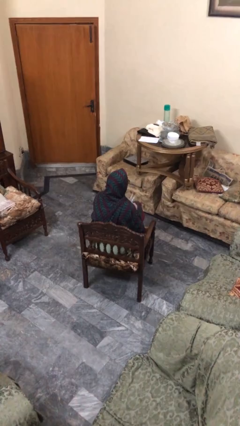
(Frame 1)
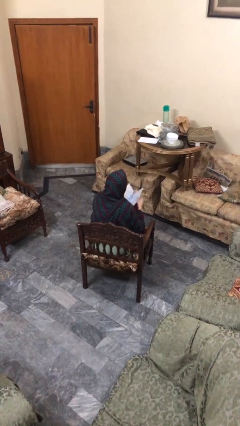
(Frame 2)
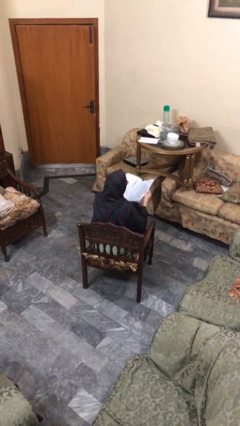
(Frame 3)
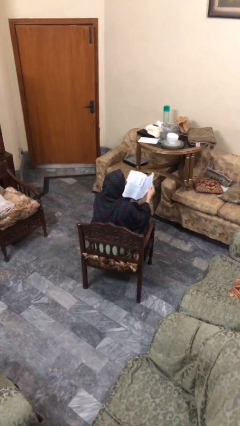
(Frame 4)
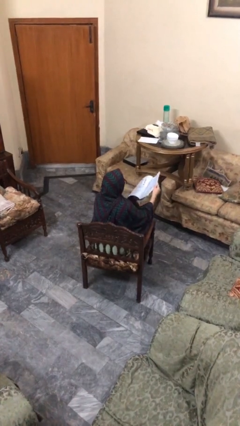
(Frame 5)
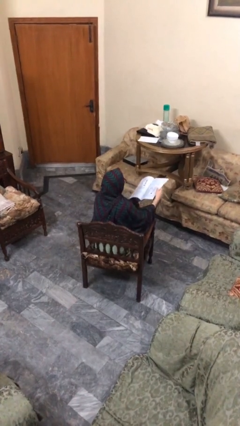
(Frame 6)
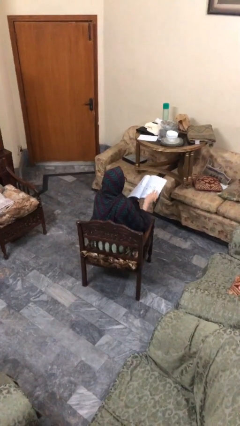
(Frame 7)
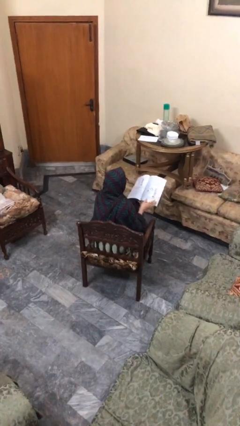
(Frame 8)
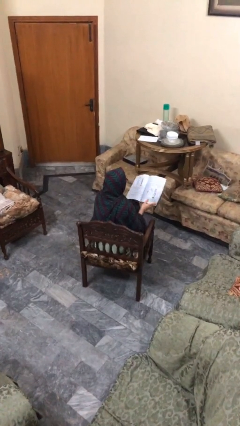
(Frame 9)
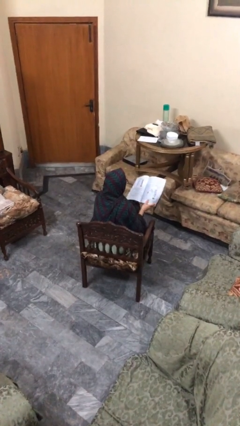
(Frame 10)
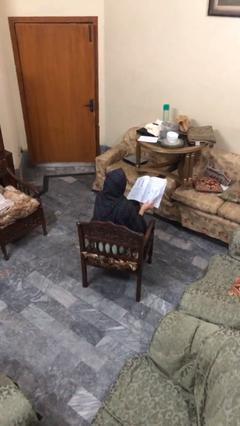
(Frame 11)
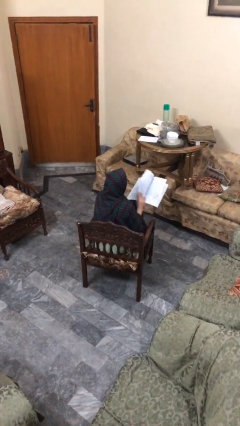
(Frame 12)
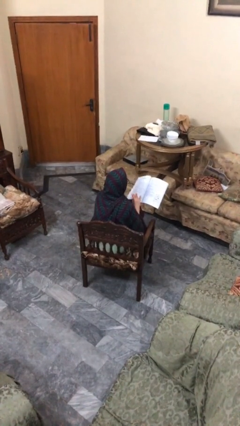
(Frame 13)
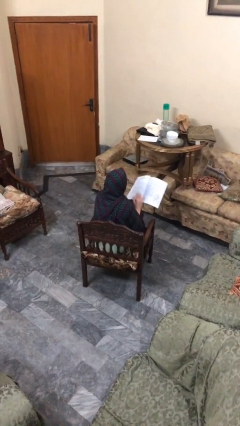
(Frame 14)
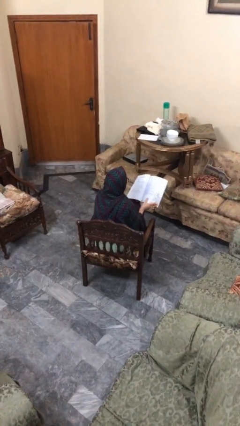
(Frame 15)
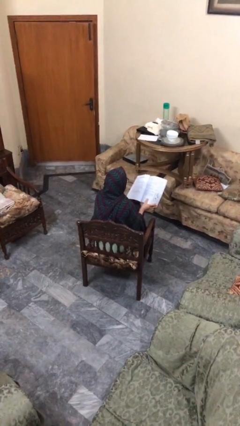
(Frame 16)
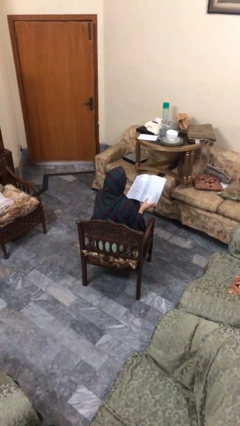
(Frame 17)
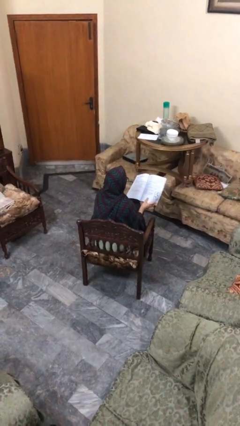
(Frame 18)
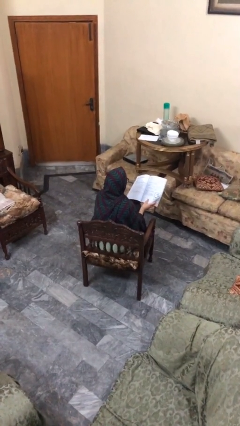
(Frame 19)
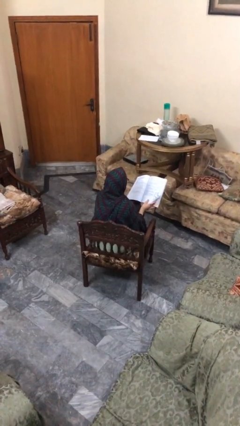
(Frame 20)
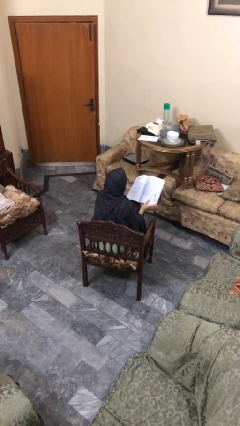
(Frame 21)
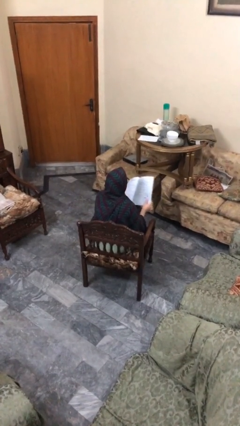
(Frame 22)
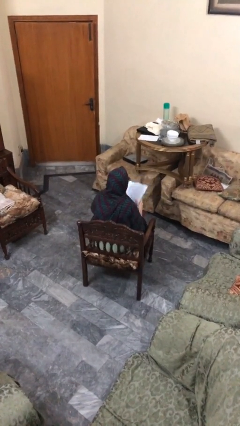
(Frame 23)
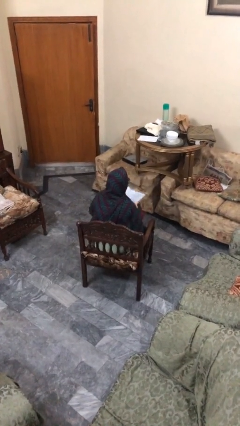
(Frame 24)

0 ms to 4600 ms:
person reads book

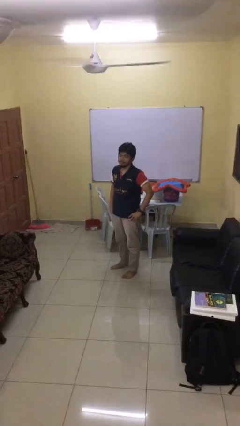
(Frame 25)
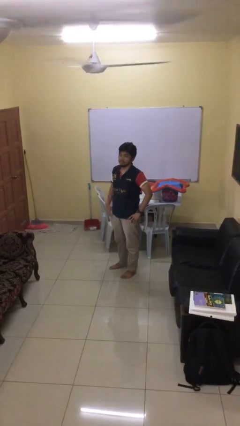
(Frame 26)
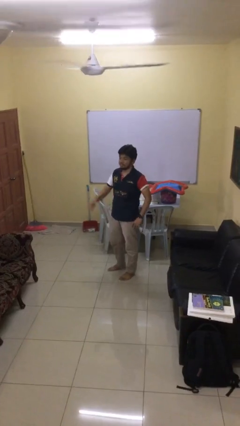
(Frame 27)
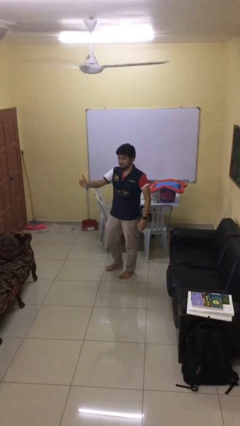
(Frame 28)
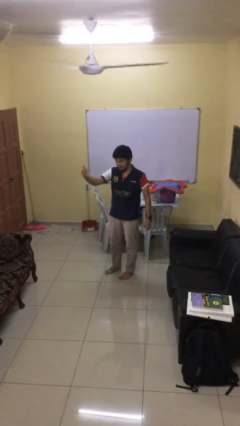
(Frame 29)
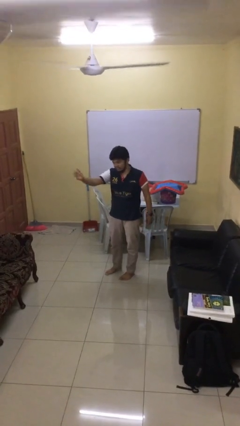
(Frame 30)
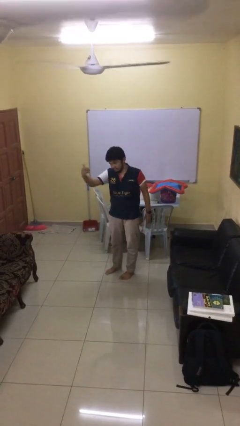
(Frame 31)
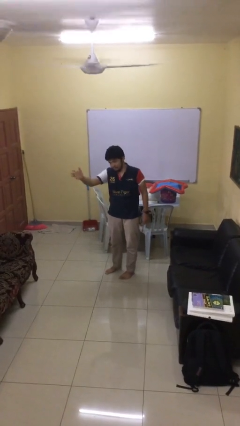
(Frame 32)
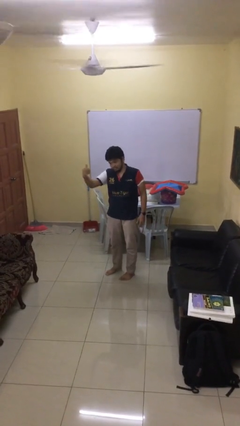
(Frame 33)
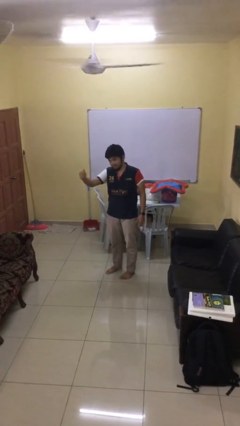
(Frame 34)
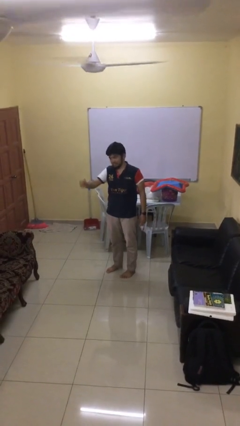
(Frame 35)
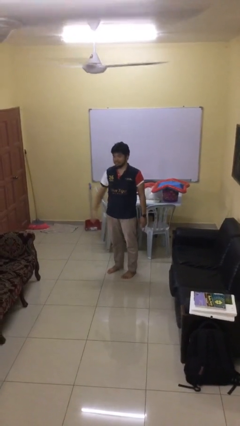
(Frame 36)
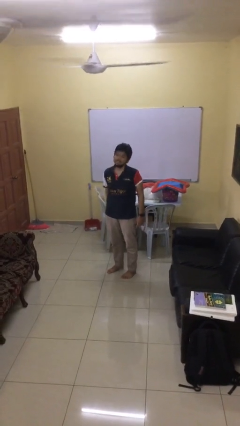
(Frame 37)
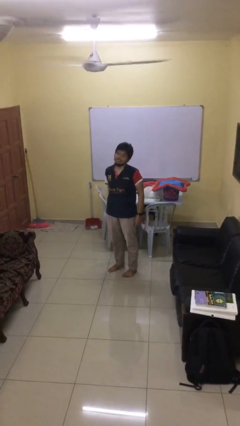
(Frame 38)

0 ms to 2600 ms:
person gestures come here

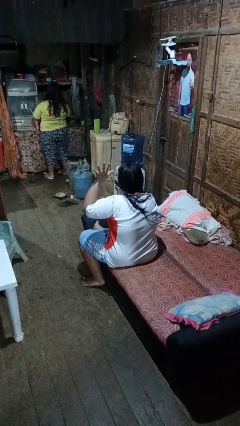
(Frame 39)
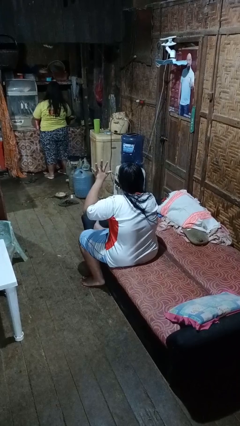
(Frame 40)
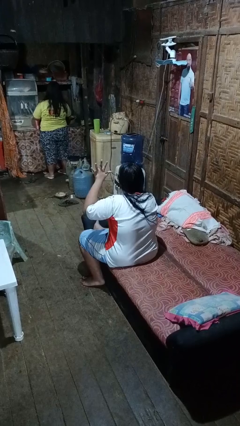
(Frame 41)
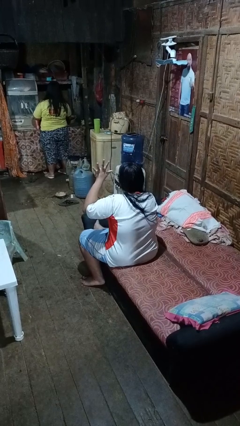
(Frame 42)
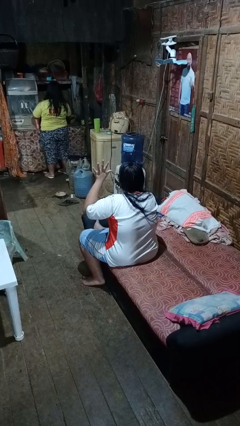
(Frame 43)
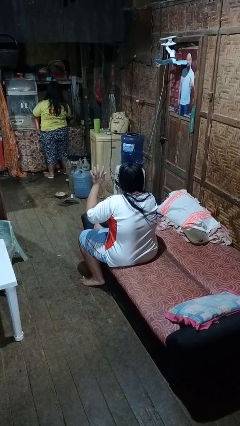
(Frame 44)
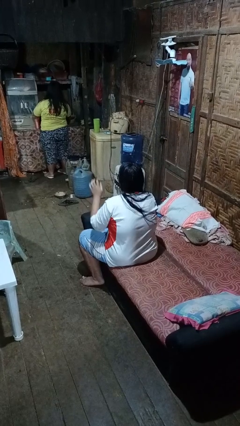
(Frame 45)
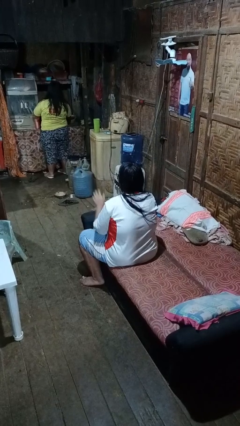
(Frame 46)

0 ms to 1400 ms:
person gestures number five

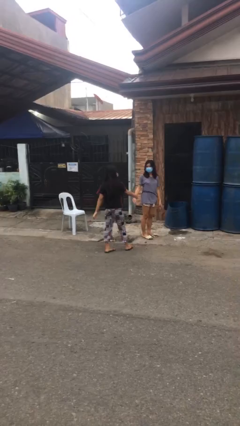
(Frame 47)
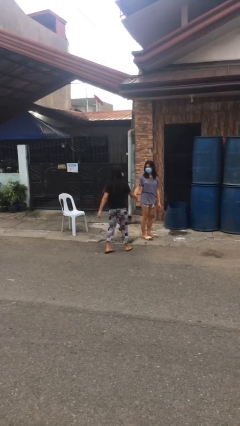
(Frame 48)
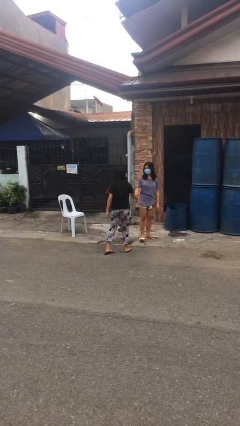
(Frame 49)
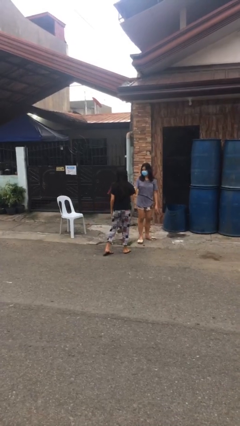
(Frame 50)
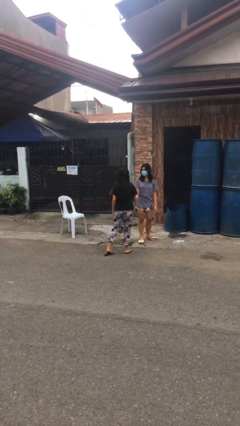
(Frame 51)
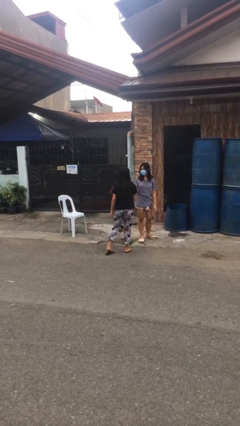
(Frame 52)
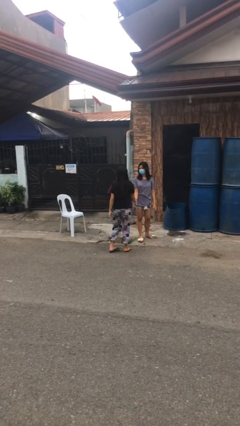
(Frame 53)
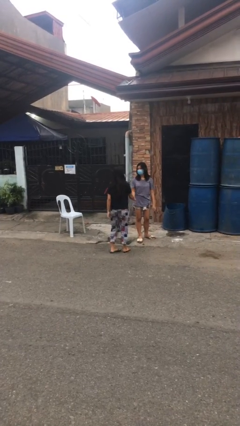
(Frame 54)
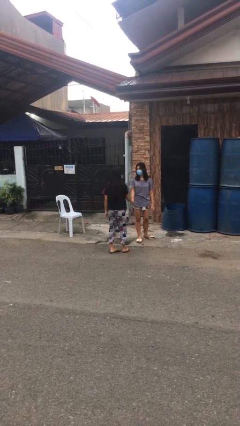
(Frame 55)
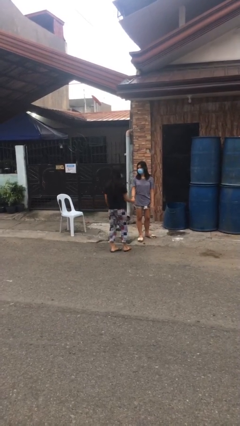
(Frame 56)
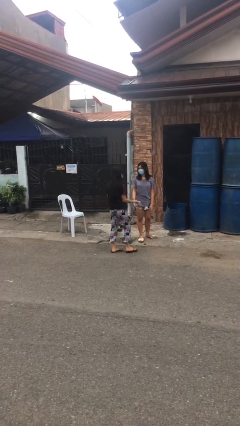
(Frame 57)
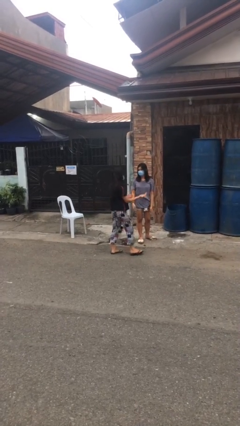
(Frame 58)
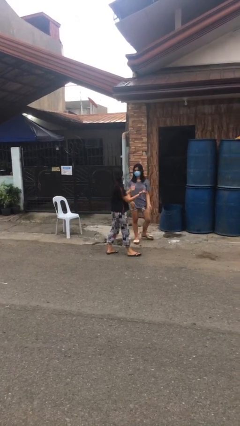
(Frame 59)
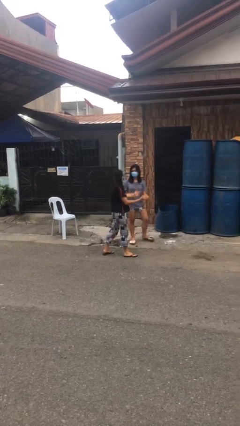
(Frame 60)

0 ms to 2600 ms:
person shakes hand

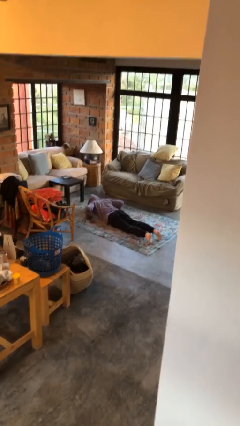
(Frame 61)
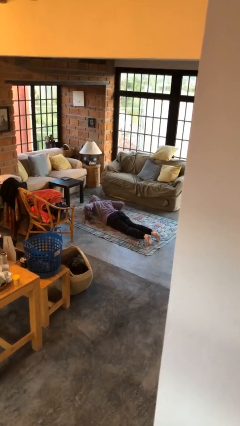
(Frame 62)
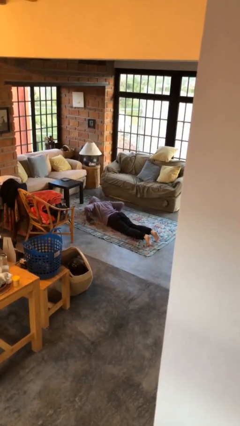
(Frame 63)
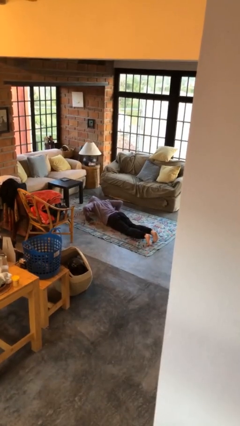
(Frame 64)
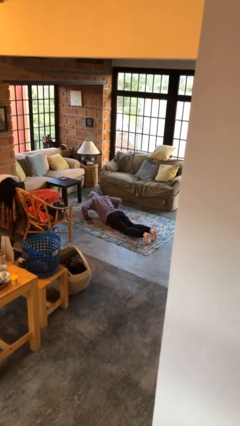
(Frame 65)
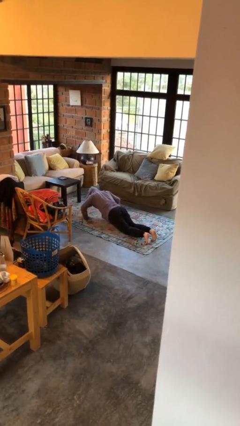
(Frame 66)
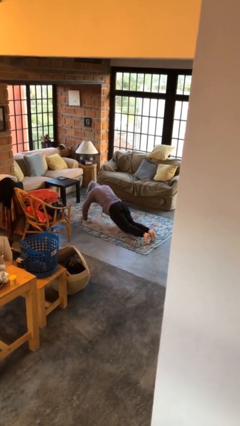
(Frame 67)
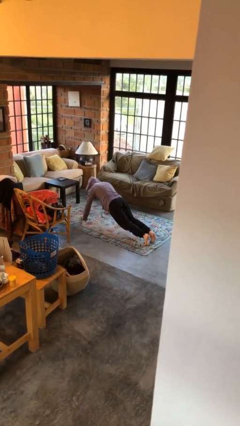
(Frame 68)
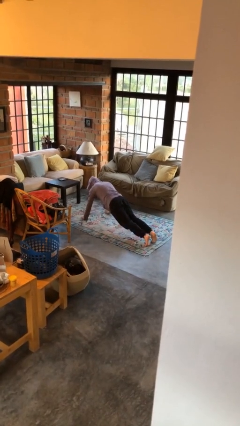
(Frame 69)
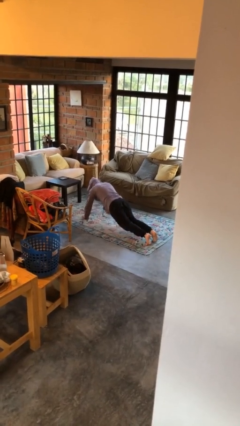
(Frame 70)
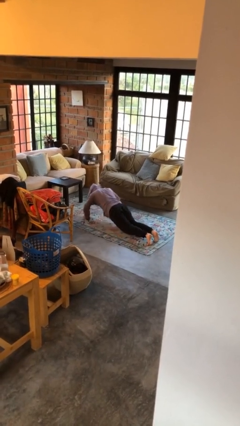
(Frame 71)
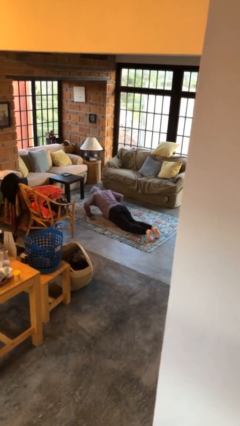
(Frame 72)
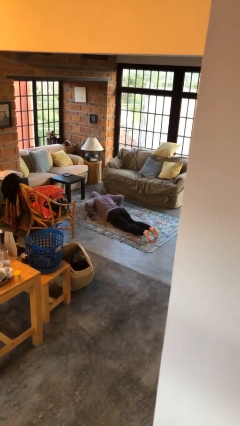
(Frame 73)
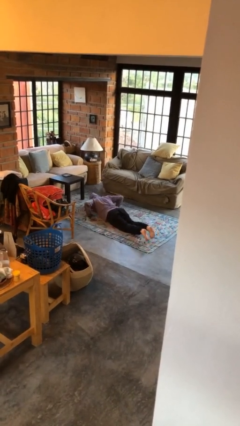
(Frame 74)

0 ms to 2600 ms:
person exercises with pushup

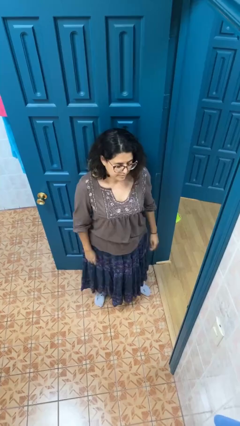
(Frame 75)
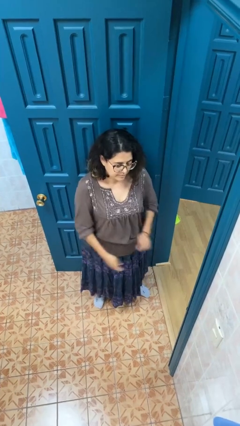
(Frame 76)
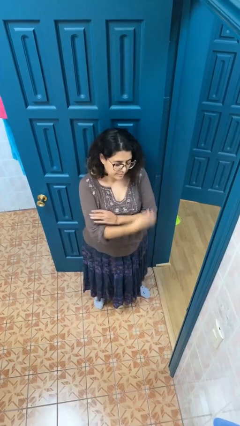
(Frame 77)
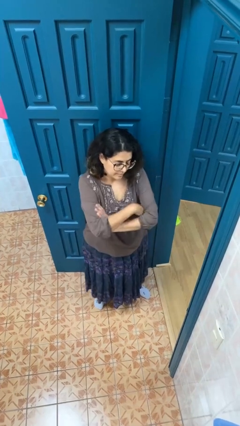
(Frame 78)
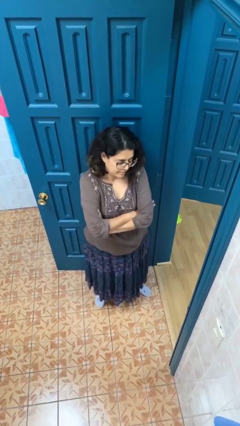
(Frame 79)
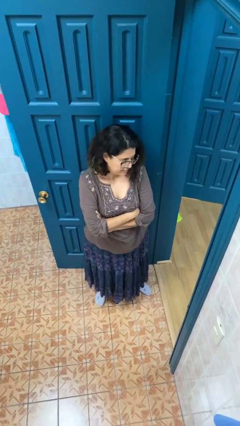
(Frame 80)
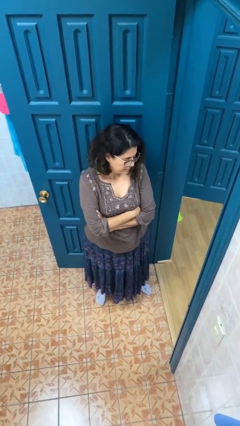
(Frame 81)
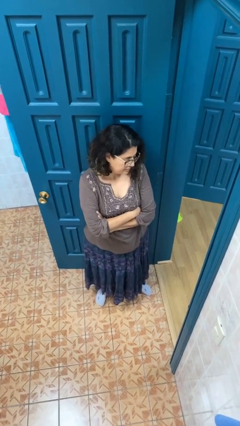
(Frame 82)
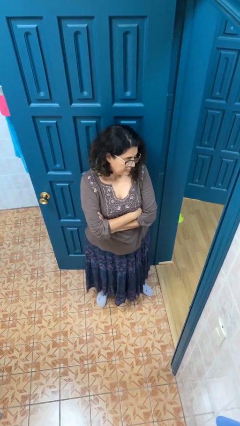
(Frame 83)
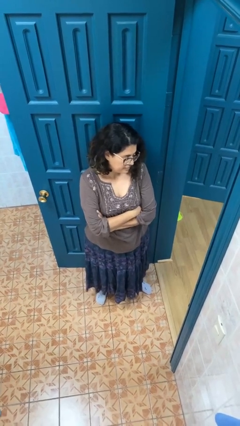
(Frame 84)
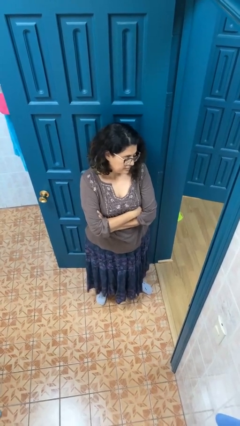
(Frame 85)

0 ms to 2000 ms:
person crosses arms

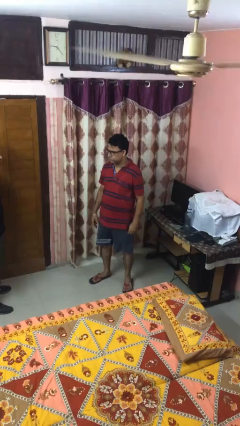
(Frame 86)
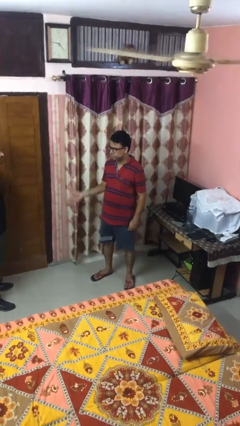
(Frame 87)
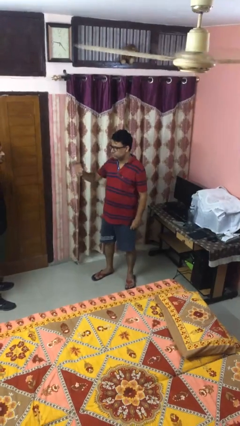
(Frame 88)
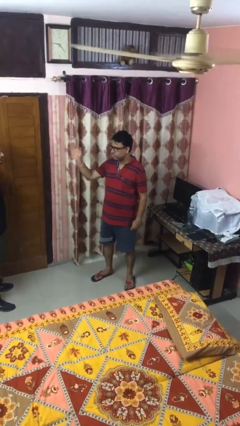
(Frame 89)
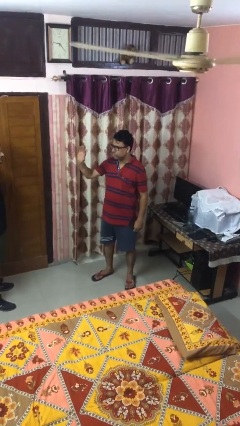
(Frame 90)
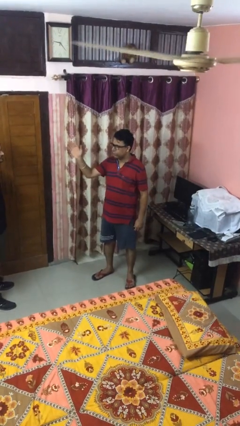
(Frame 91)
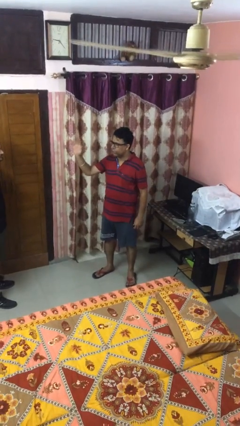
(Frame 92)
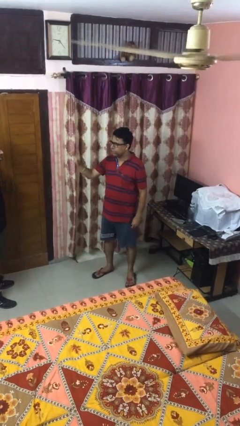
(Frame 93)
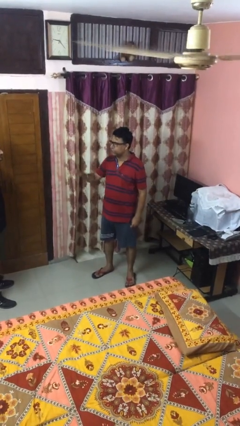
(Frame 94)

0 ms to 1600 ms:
person waves at person
